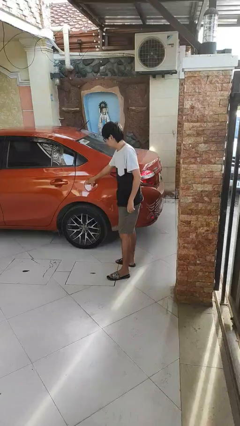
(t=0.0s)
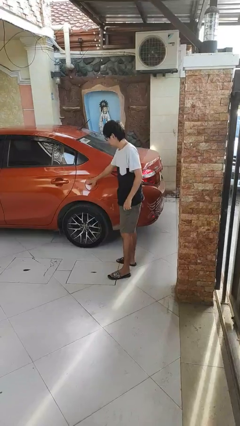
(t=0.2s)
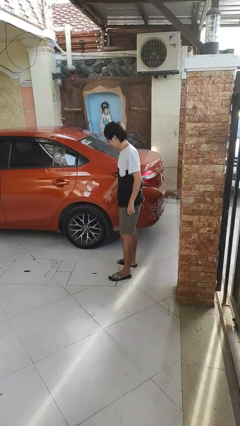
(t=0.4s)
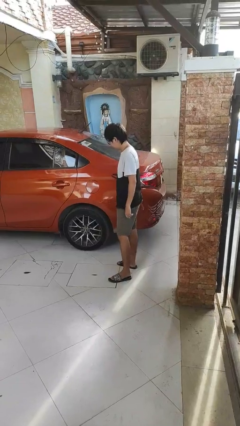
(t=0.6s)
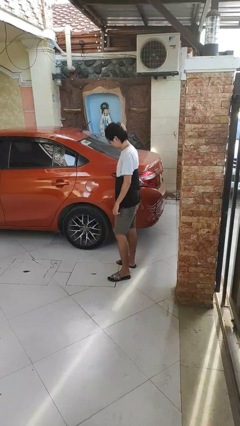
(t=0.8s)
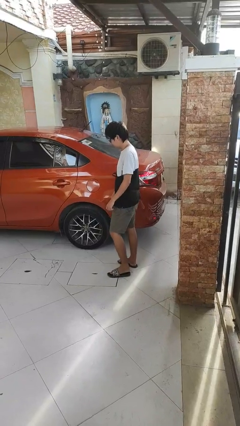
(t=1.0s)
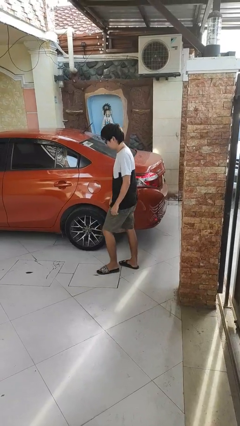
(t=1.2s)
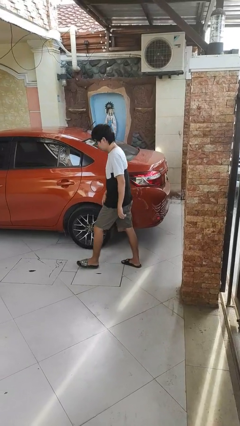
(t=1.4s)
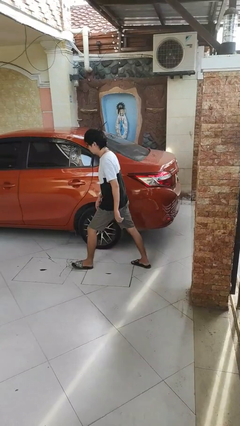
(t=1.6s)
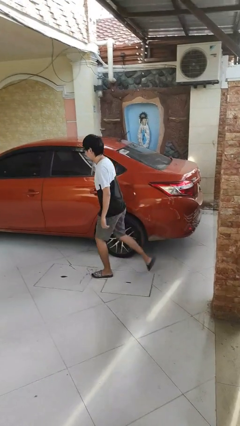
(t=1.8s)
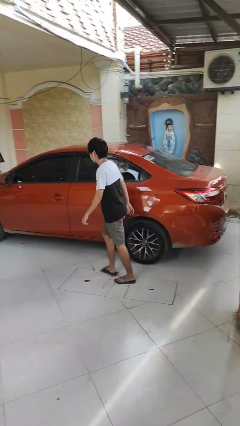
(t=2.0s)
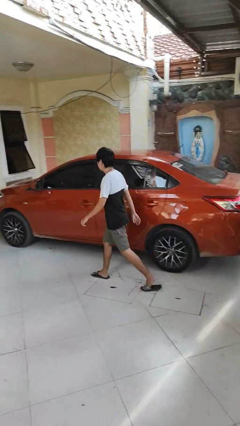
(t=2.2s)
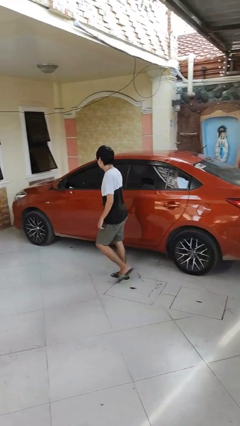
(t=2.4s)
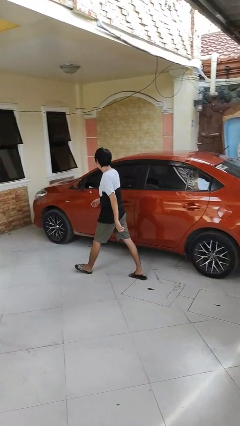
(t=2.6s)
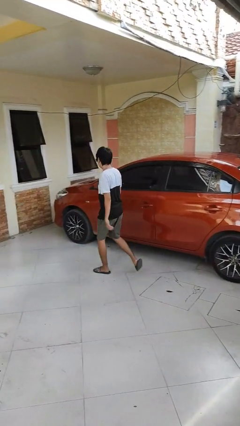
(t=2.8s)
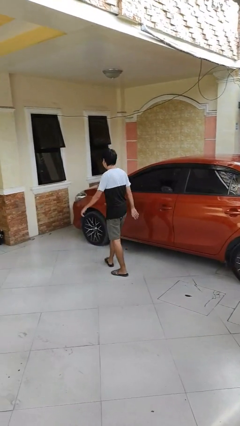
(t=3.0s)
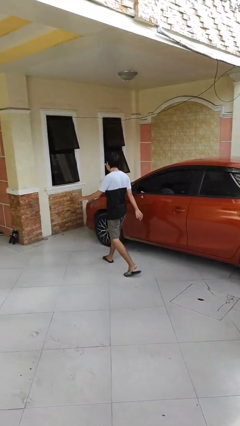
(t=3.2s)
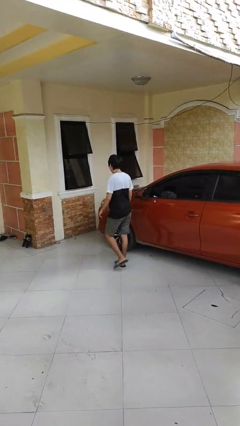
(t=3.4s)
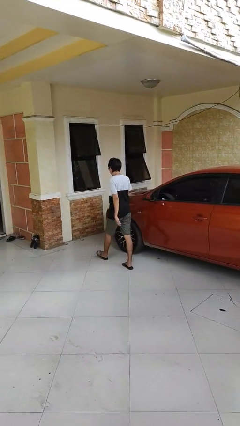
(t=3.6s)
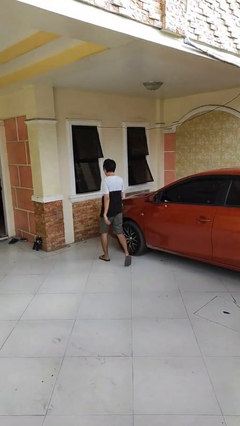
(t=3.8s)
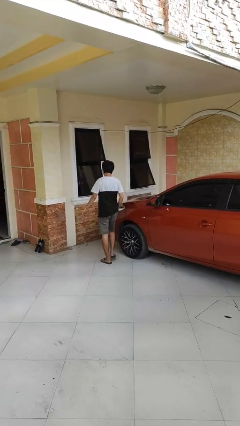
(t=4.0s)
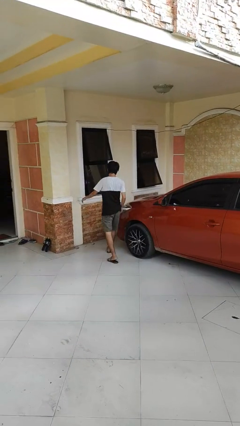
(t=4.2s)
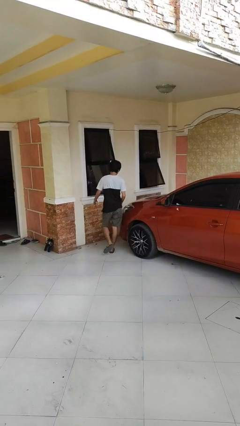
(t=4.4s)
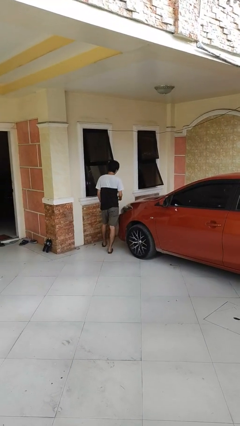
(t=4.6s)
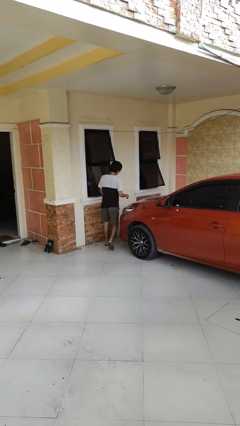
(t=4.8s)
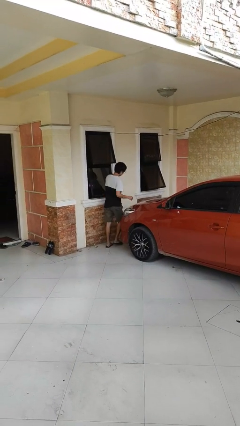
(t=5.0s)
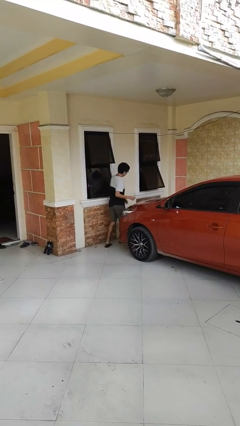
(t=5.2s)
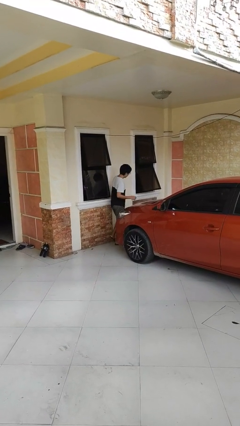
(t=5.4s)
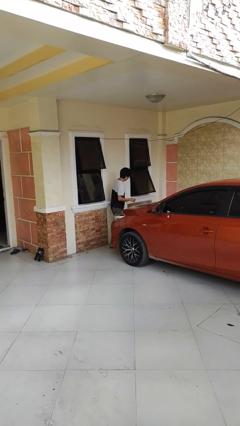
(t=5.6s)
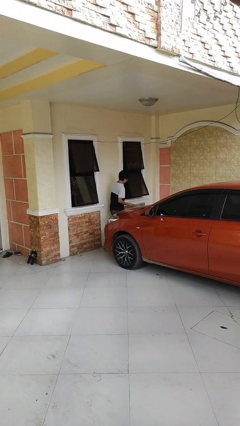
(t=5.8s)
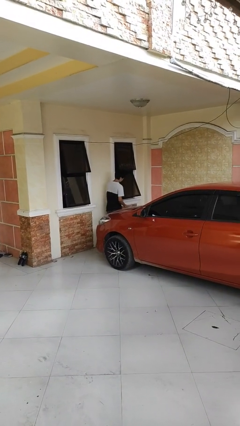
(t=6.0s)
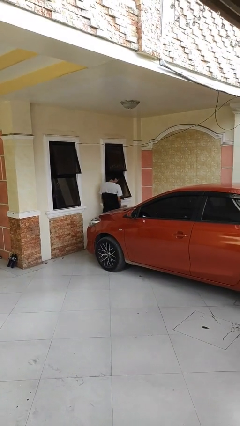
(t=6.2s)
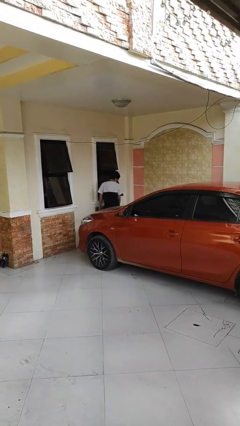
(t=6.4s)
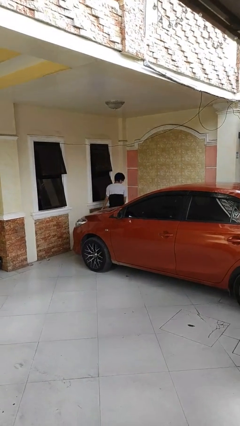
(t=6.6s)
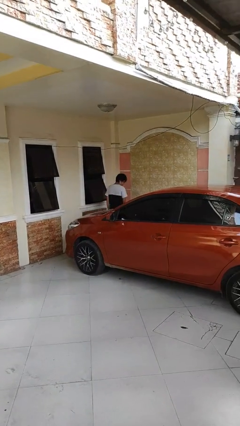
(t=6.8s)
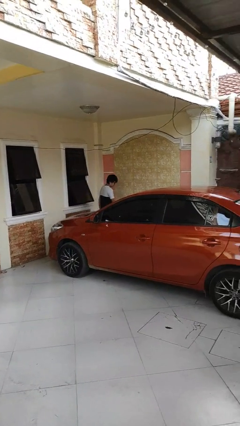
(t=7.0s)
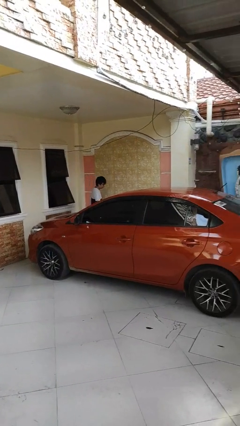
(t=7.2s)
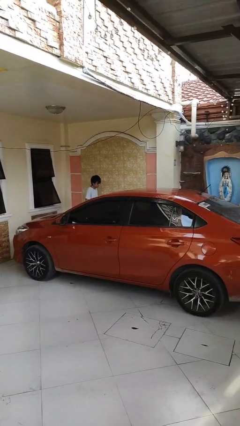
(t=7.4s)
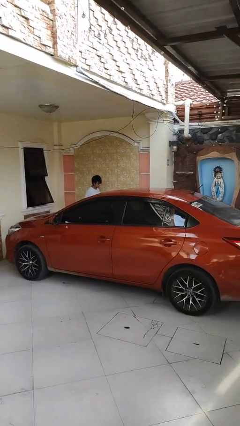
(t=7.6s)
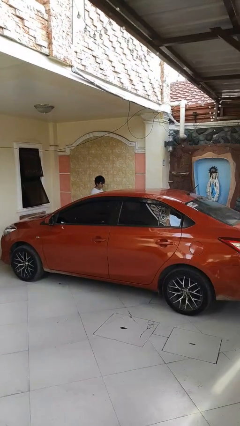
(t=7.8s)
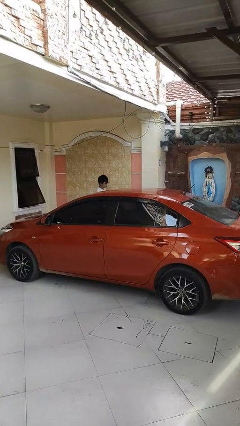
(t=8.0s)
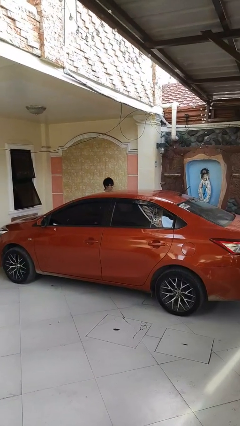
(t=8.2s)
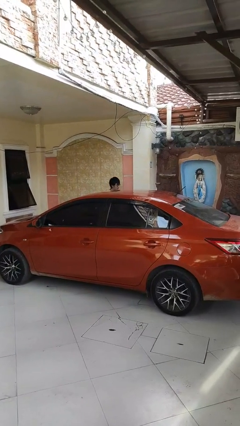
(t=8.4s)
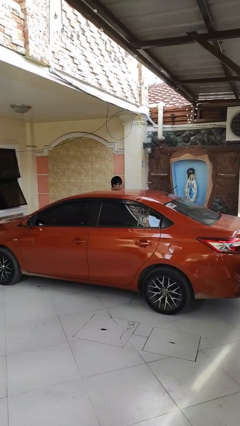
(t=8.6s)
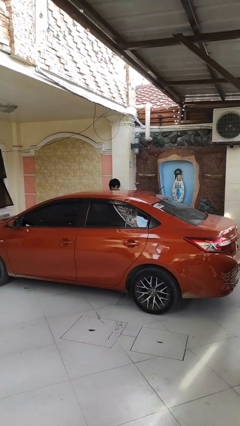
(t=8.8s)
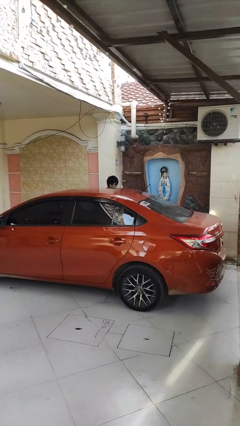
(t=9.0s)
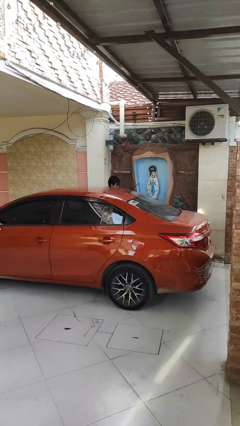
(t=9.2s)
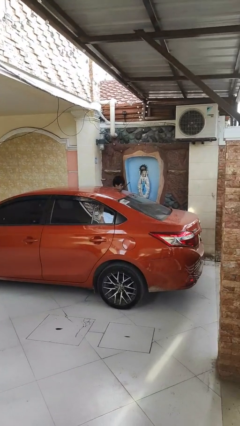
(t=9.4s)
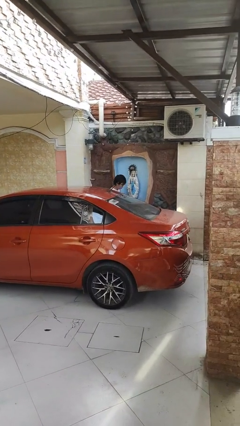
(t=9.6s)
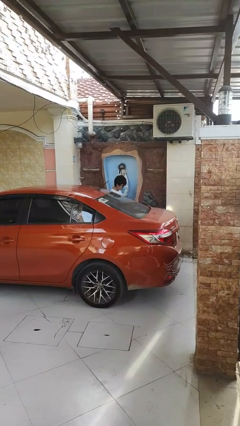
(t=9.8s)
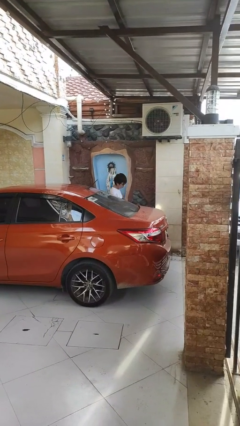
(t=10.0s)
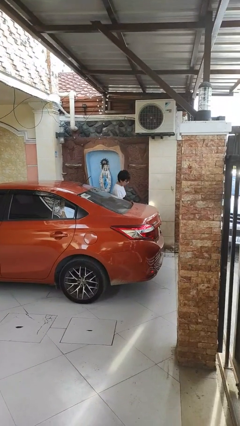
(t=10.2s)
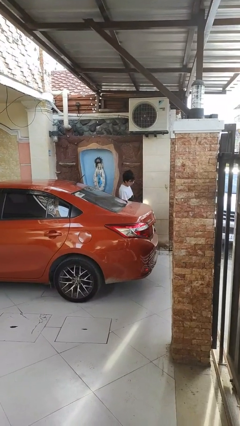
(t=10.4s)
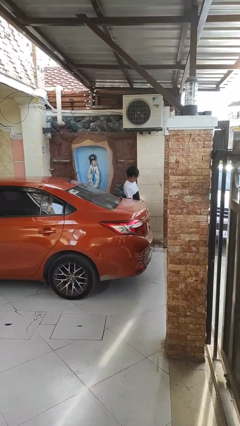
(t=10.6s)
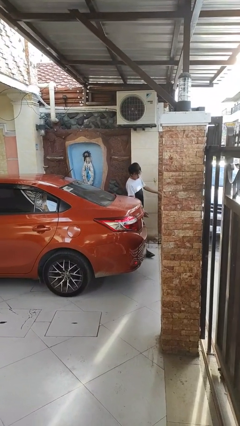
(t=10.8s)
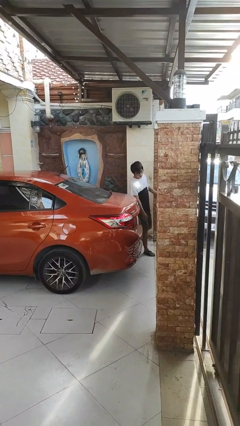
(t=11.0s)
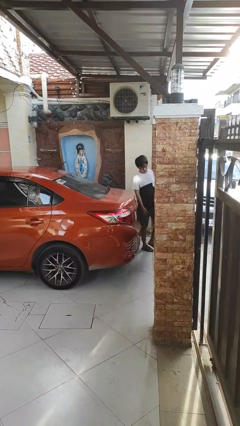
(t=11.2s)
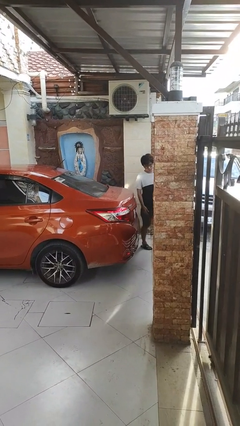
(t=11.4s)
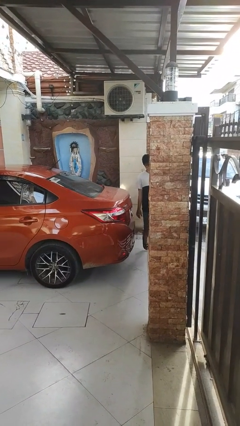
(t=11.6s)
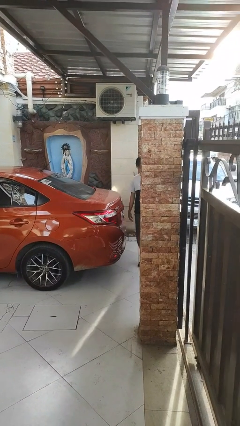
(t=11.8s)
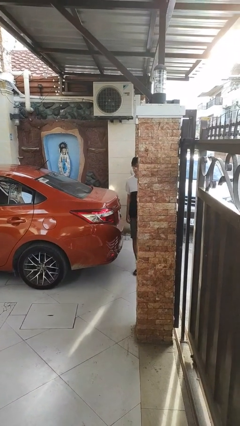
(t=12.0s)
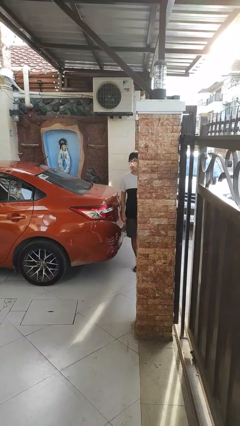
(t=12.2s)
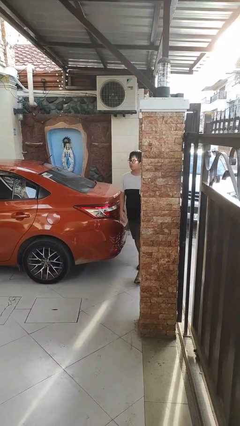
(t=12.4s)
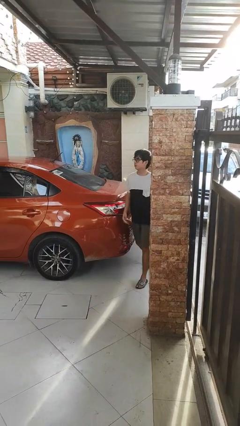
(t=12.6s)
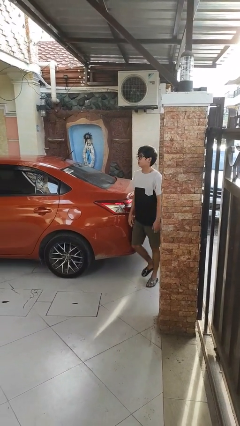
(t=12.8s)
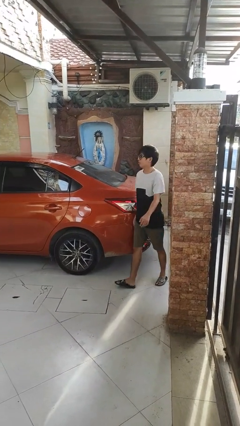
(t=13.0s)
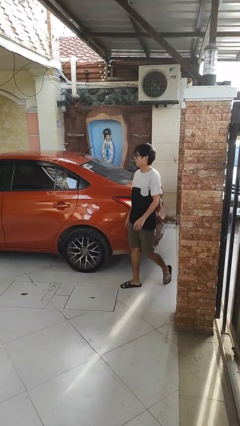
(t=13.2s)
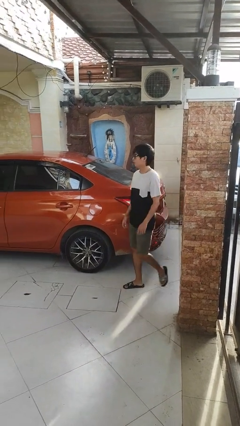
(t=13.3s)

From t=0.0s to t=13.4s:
person walks around car

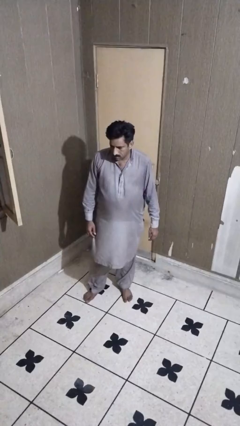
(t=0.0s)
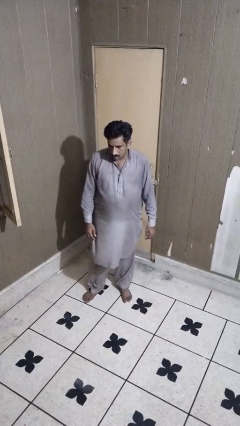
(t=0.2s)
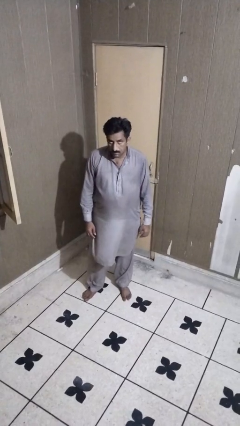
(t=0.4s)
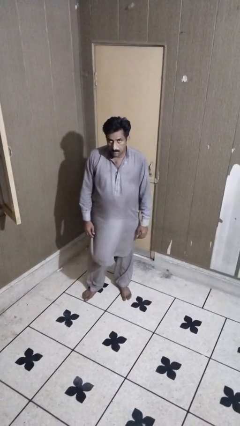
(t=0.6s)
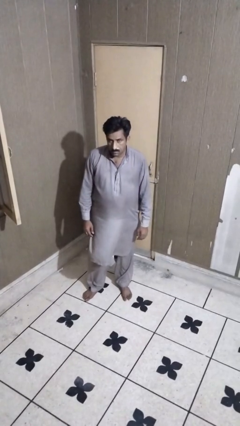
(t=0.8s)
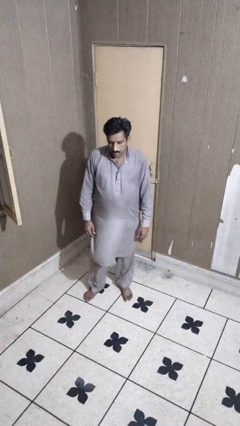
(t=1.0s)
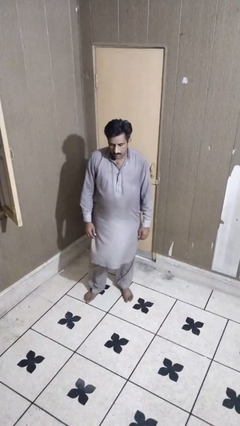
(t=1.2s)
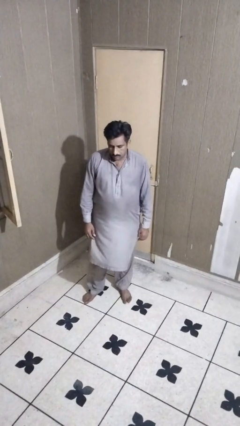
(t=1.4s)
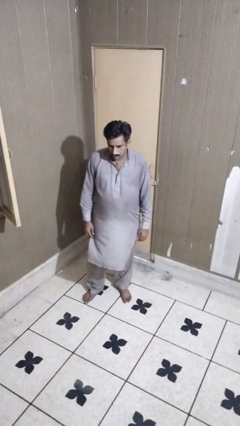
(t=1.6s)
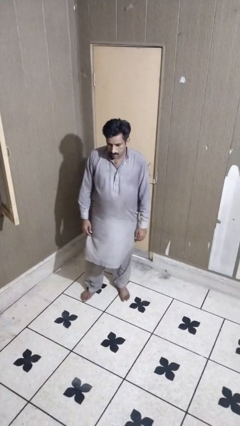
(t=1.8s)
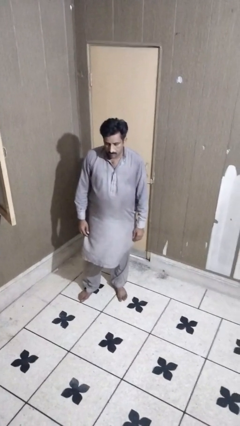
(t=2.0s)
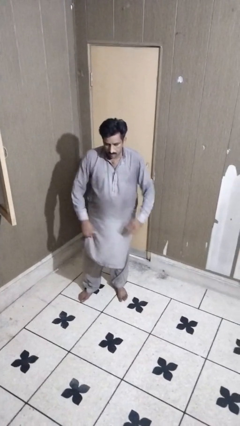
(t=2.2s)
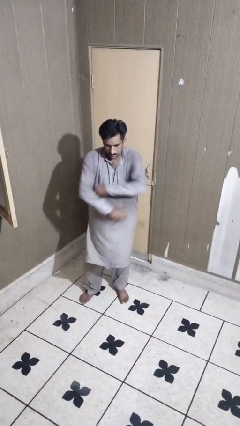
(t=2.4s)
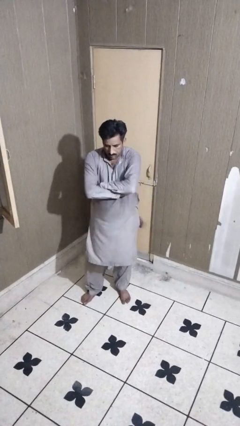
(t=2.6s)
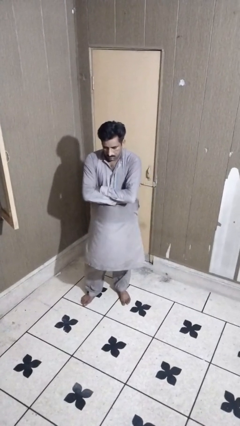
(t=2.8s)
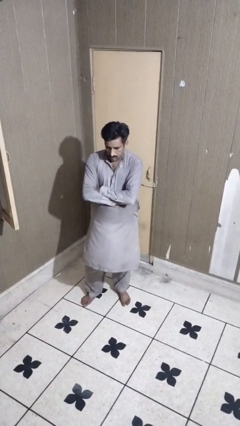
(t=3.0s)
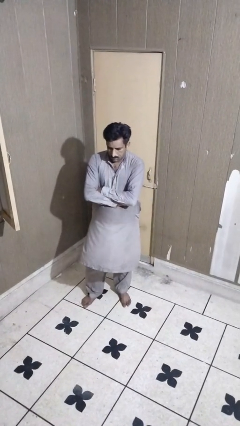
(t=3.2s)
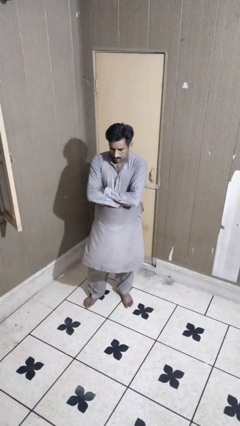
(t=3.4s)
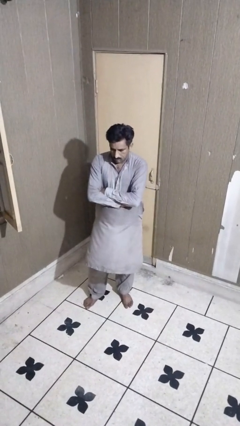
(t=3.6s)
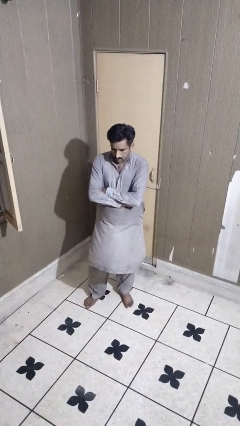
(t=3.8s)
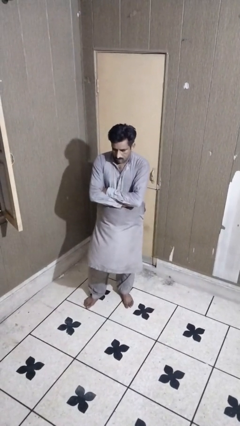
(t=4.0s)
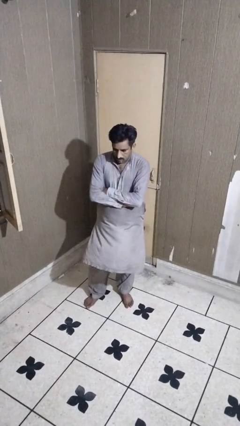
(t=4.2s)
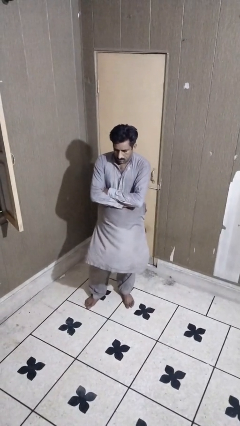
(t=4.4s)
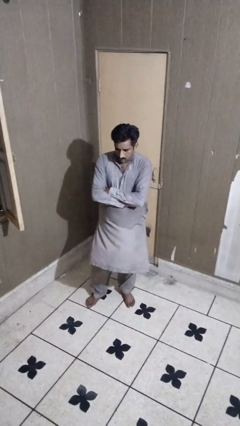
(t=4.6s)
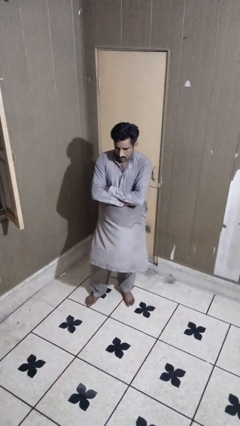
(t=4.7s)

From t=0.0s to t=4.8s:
person crosses arms
